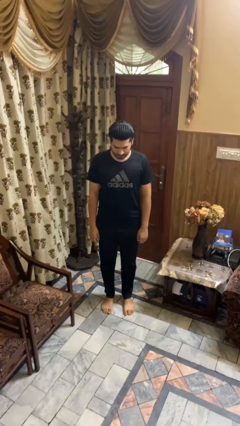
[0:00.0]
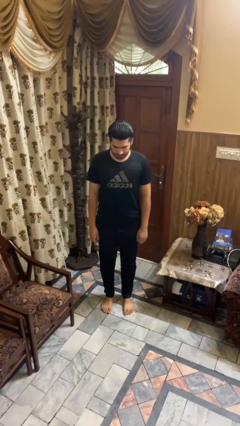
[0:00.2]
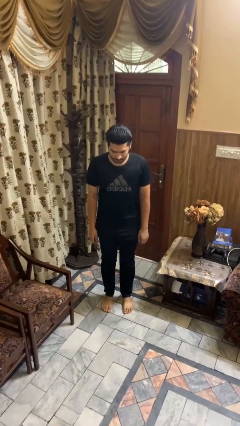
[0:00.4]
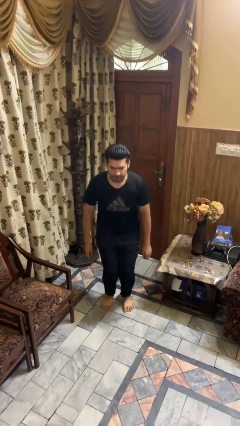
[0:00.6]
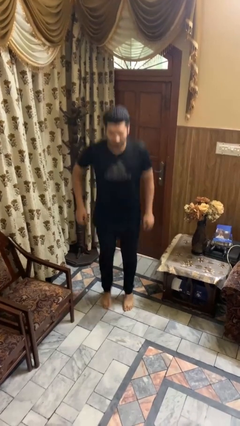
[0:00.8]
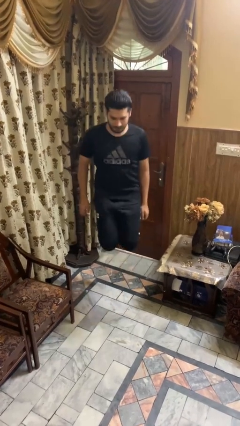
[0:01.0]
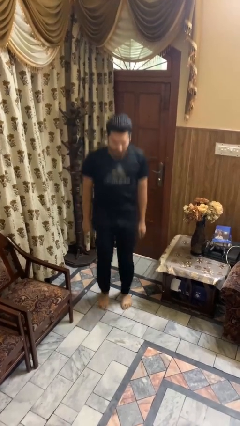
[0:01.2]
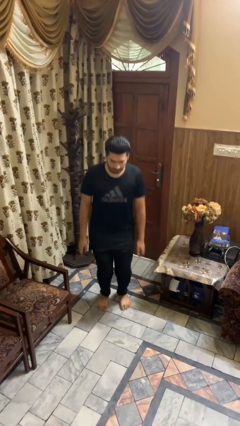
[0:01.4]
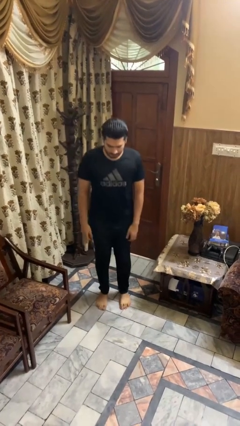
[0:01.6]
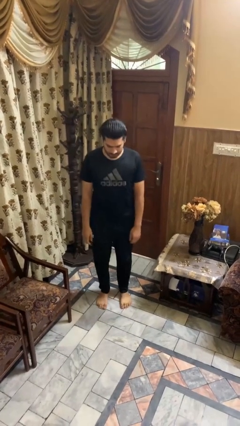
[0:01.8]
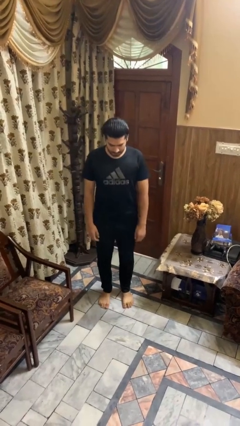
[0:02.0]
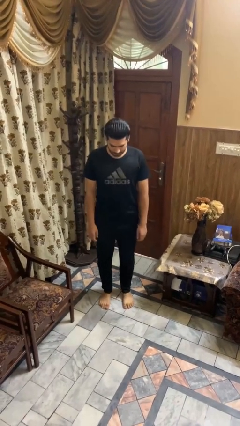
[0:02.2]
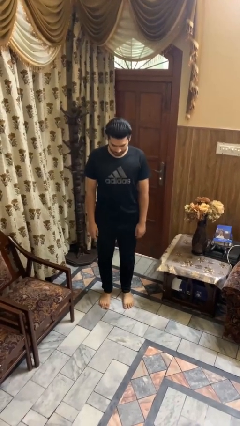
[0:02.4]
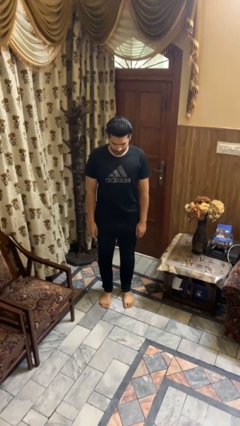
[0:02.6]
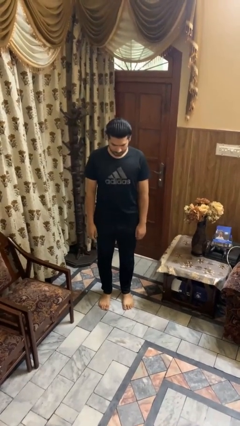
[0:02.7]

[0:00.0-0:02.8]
person jumps

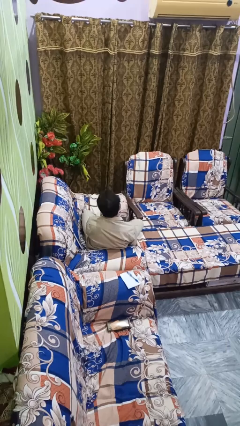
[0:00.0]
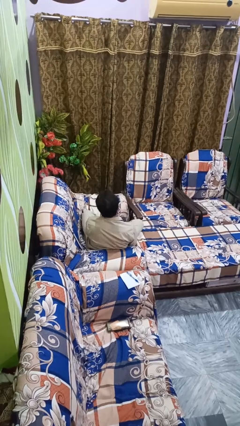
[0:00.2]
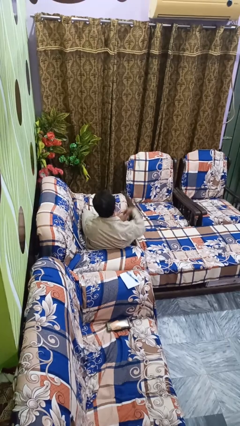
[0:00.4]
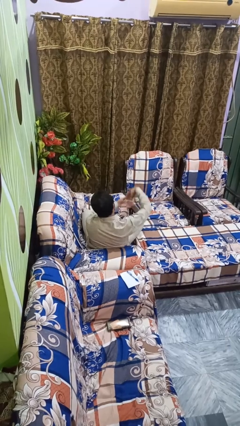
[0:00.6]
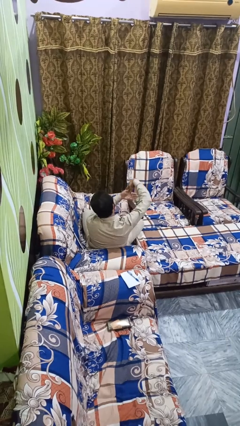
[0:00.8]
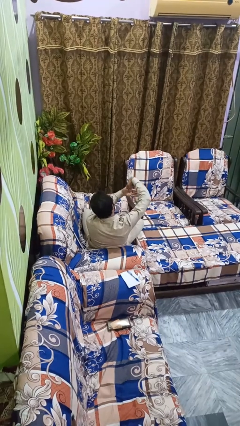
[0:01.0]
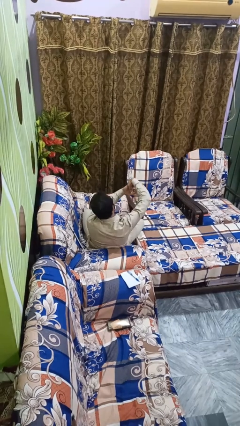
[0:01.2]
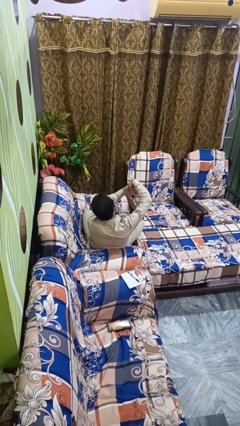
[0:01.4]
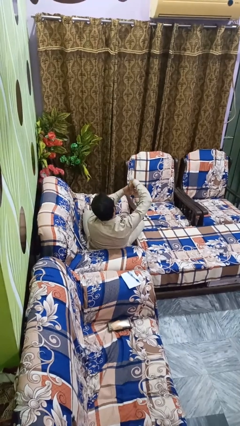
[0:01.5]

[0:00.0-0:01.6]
person gestures hang loose

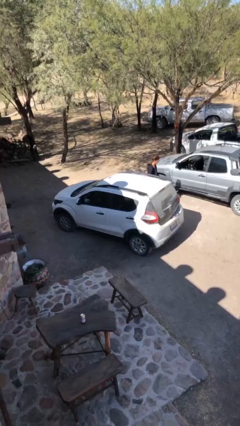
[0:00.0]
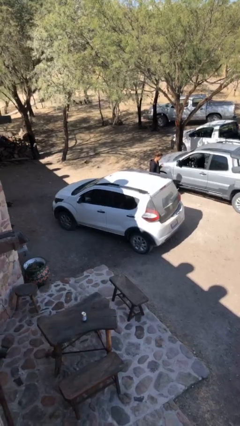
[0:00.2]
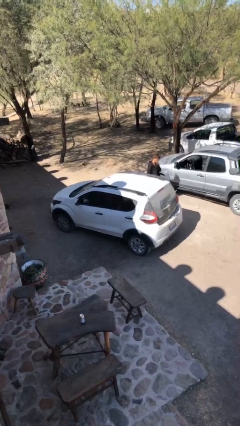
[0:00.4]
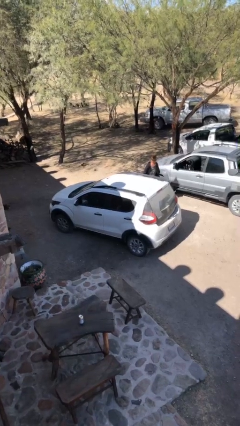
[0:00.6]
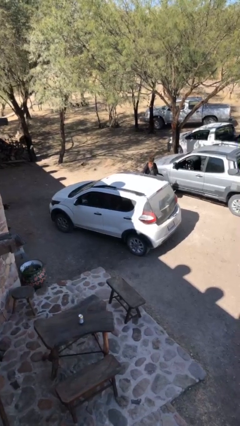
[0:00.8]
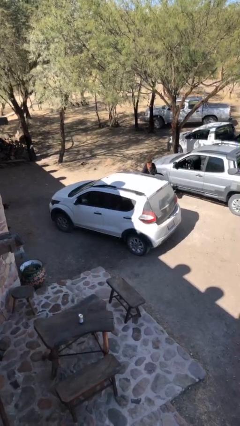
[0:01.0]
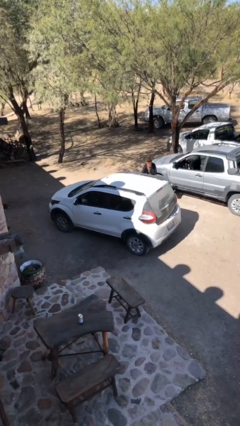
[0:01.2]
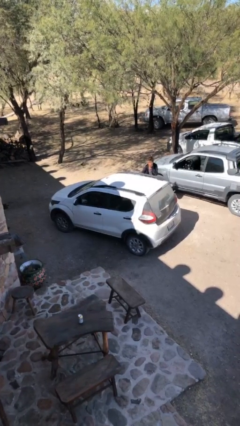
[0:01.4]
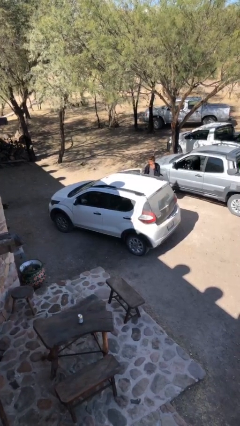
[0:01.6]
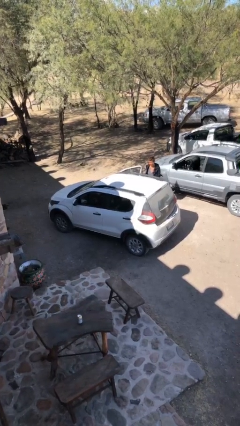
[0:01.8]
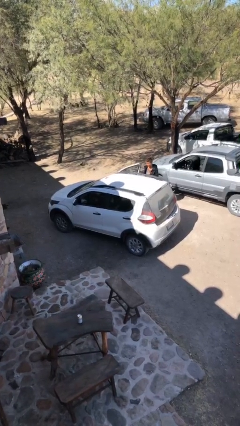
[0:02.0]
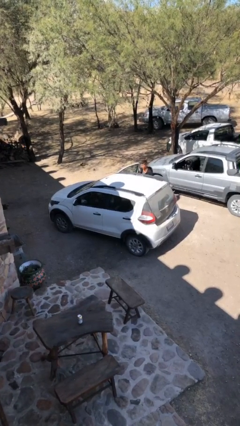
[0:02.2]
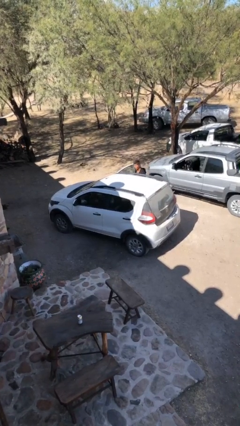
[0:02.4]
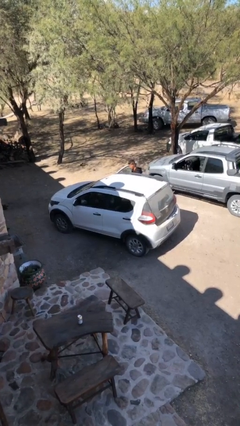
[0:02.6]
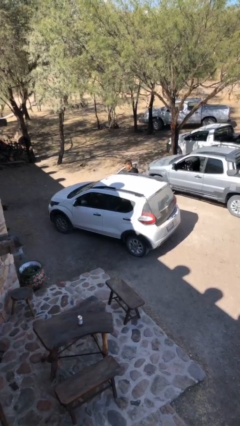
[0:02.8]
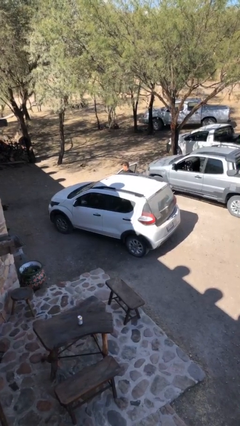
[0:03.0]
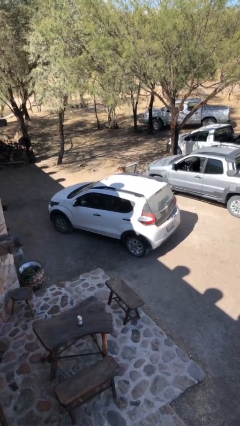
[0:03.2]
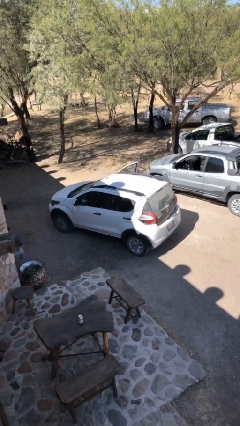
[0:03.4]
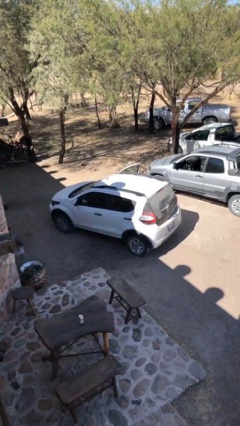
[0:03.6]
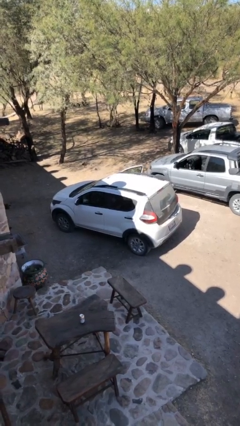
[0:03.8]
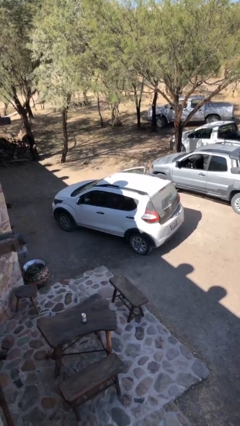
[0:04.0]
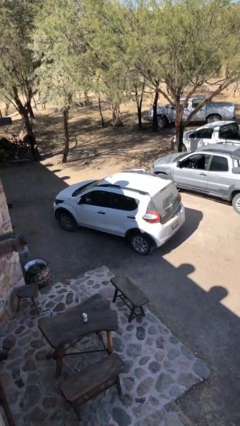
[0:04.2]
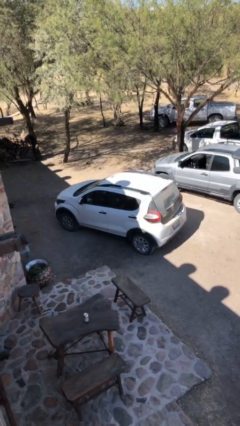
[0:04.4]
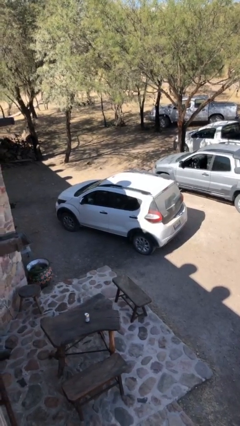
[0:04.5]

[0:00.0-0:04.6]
car picks up person

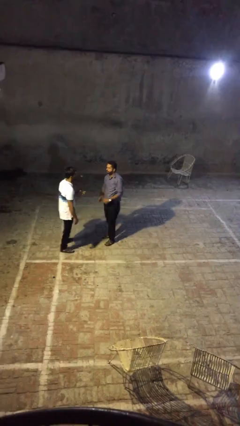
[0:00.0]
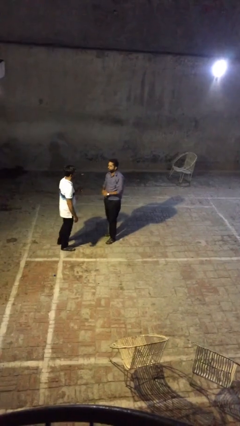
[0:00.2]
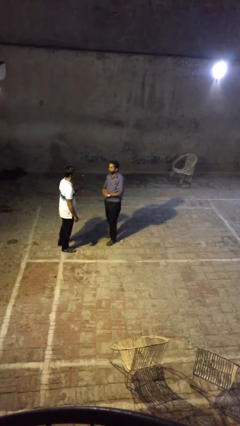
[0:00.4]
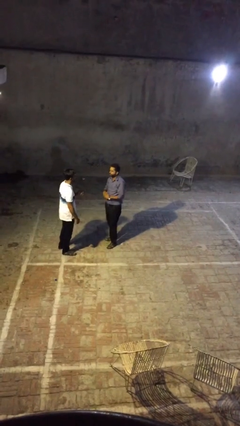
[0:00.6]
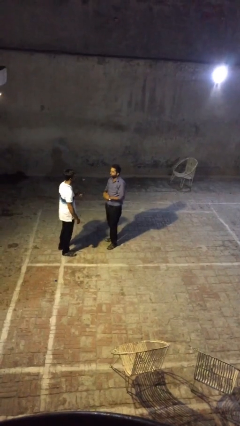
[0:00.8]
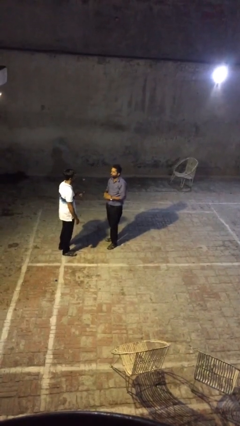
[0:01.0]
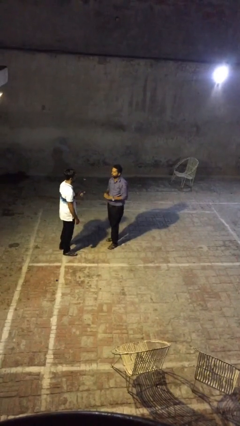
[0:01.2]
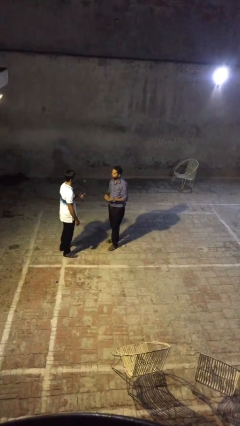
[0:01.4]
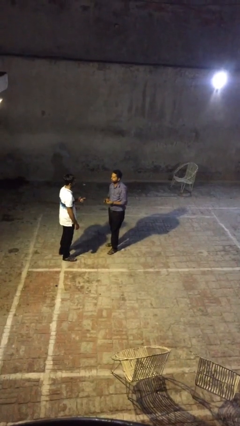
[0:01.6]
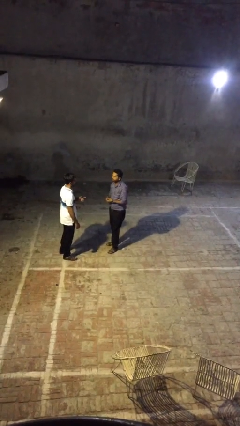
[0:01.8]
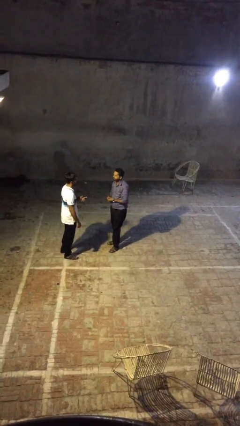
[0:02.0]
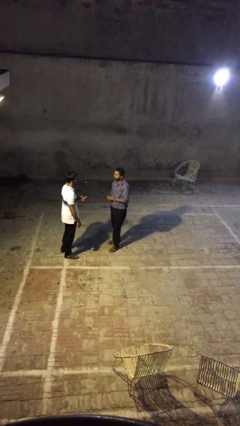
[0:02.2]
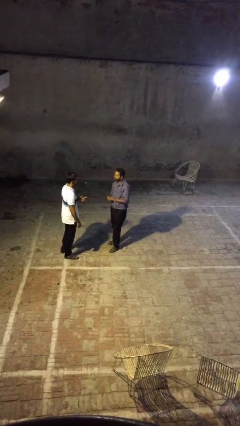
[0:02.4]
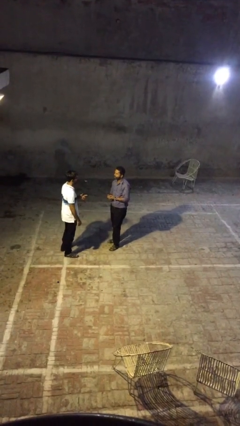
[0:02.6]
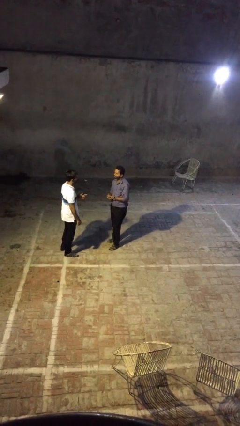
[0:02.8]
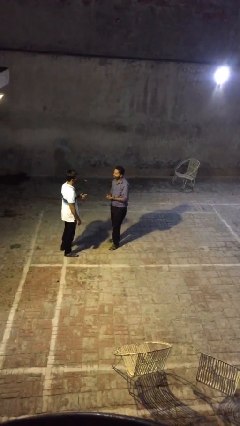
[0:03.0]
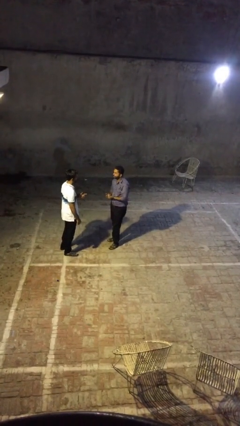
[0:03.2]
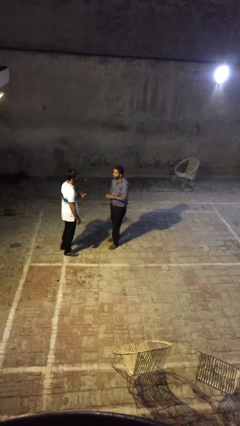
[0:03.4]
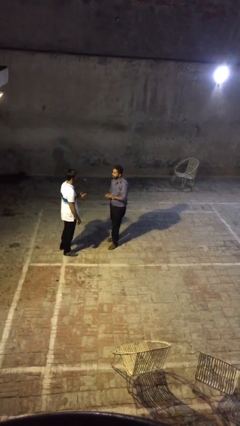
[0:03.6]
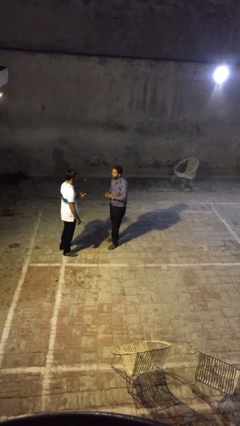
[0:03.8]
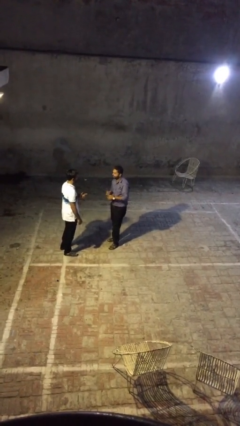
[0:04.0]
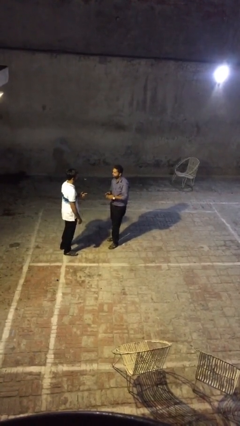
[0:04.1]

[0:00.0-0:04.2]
person talks to person

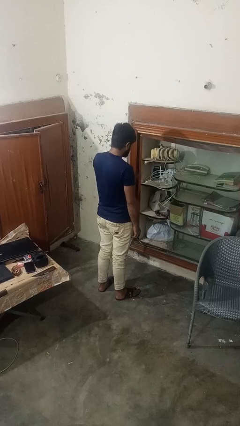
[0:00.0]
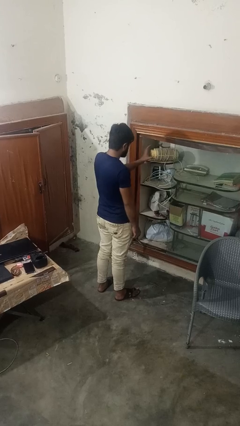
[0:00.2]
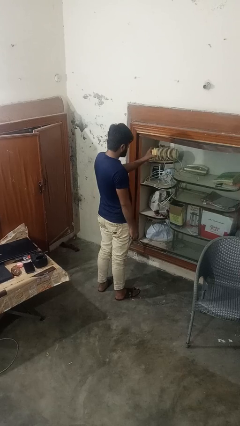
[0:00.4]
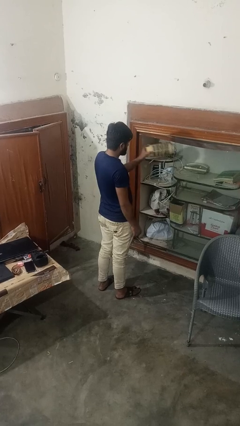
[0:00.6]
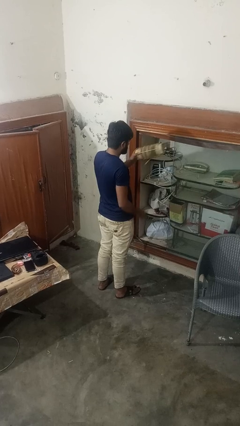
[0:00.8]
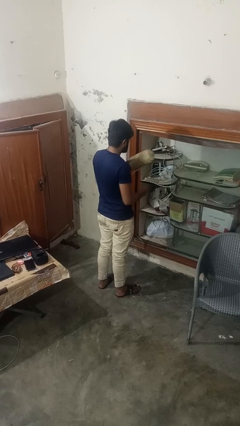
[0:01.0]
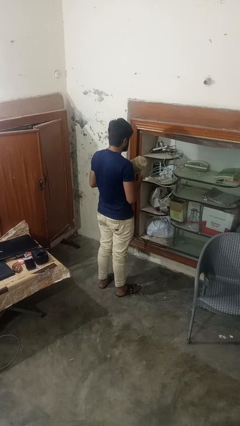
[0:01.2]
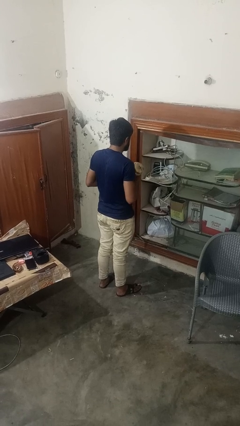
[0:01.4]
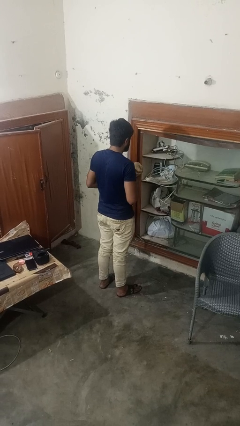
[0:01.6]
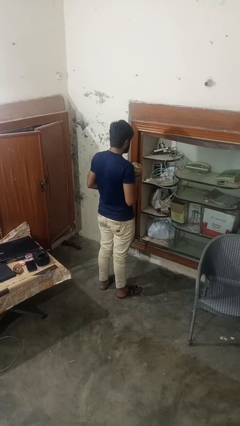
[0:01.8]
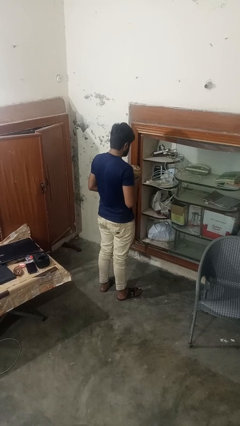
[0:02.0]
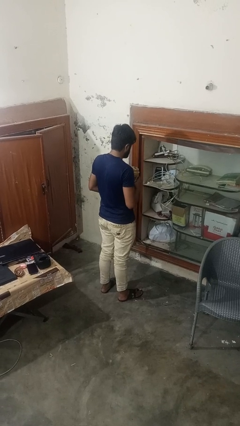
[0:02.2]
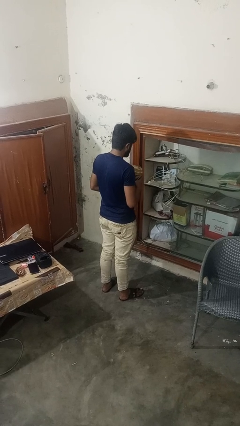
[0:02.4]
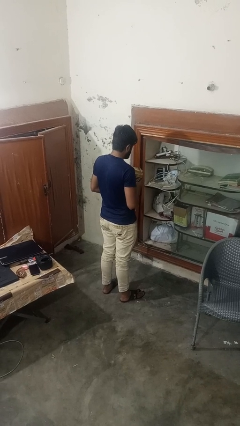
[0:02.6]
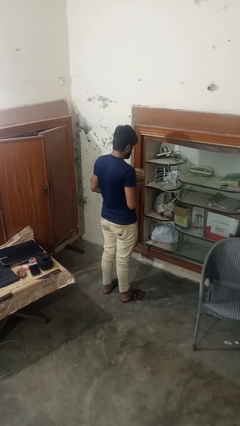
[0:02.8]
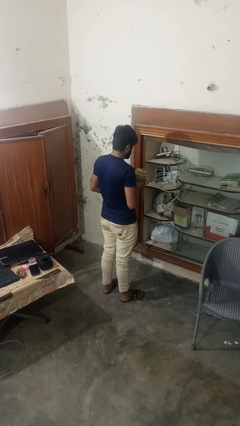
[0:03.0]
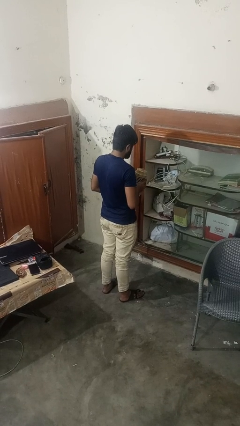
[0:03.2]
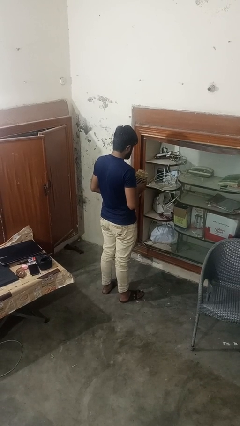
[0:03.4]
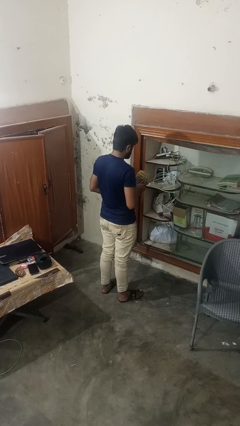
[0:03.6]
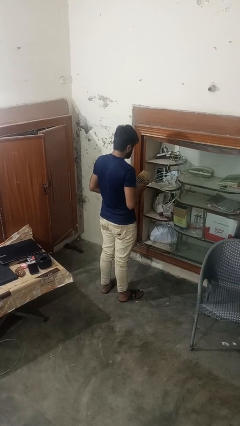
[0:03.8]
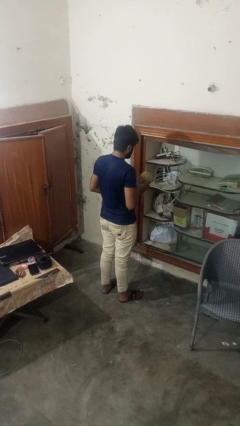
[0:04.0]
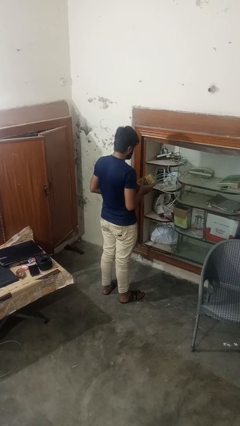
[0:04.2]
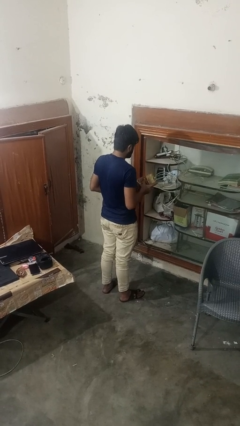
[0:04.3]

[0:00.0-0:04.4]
person picks up object from countertop
